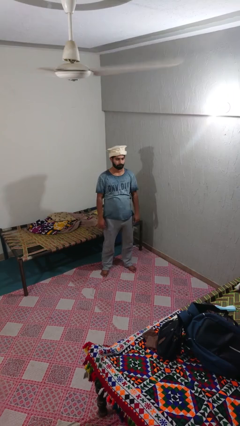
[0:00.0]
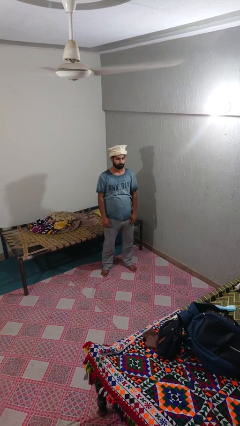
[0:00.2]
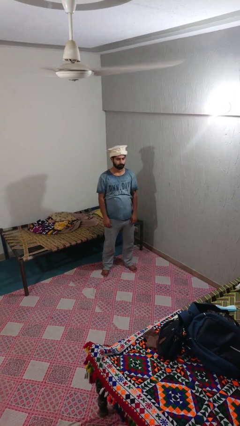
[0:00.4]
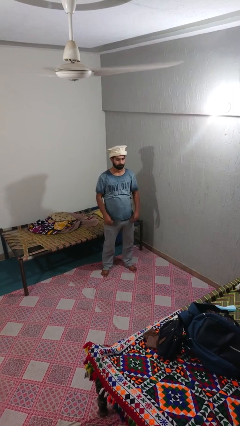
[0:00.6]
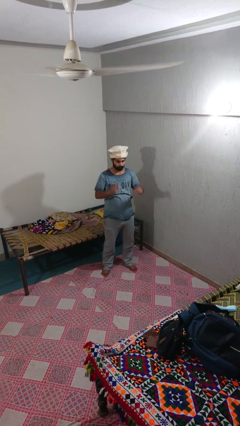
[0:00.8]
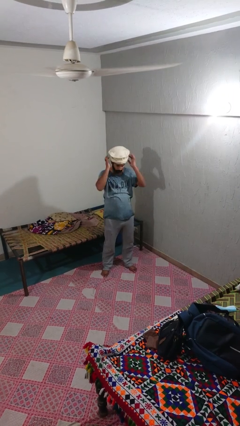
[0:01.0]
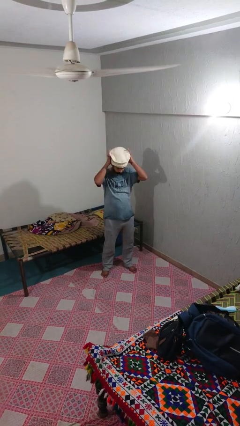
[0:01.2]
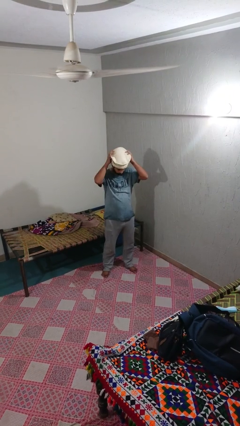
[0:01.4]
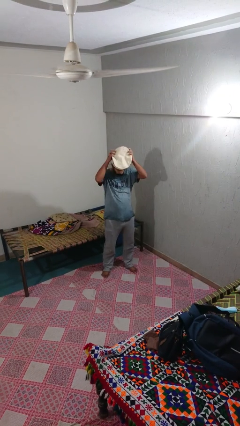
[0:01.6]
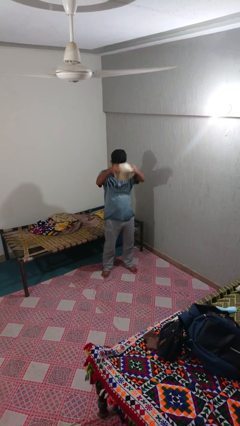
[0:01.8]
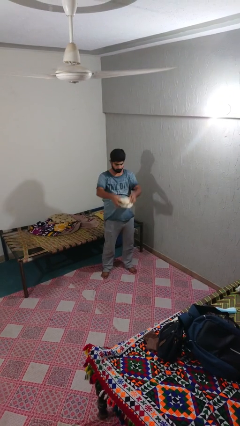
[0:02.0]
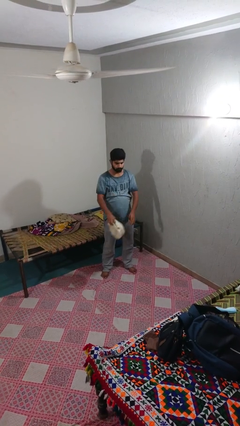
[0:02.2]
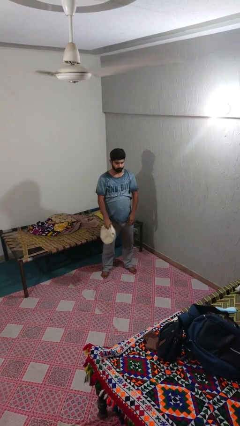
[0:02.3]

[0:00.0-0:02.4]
person takes off hat

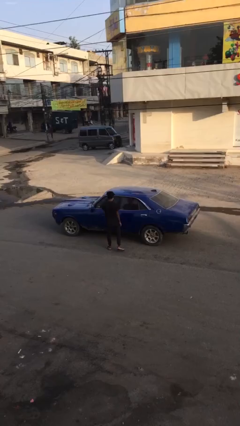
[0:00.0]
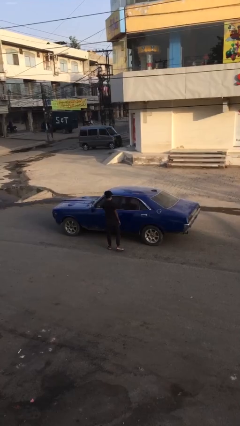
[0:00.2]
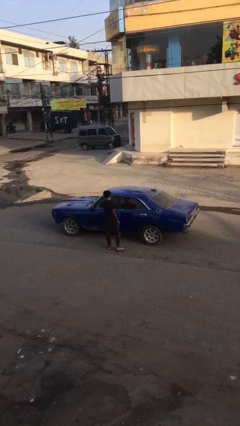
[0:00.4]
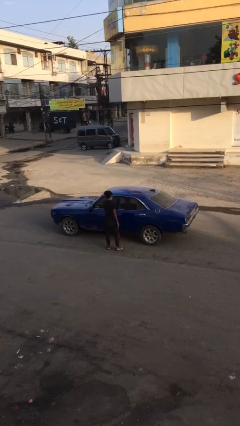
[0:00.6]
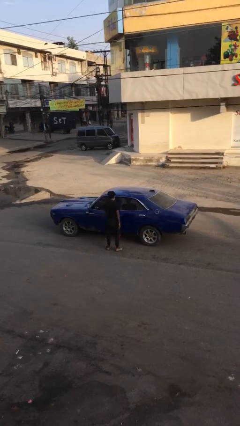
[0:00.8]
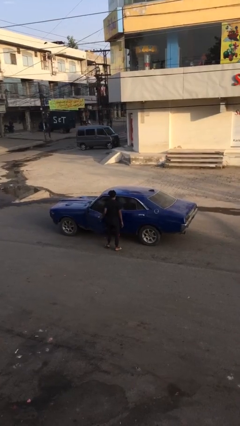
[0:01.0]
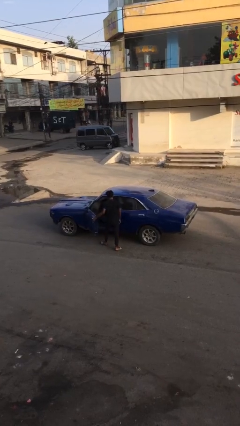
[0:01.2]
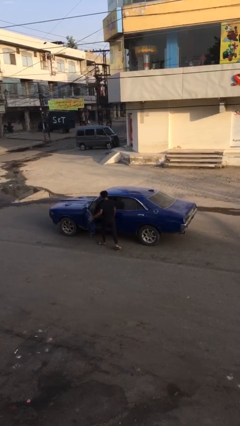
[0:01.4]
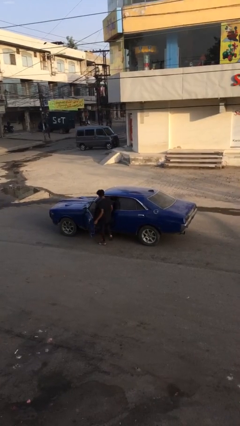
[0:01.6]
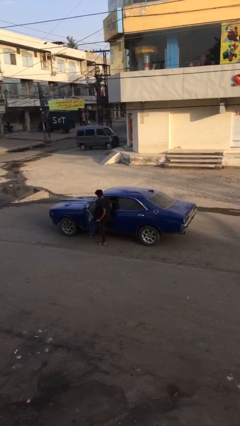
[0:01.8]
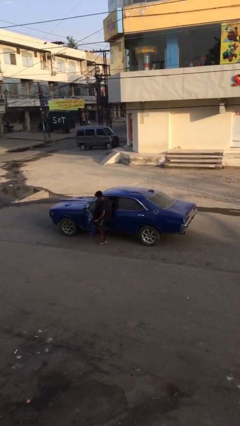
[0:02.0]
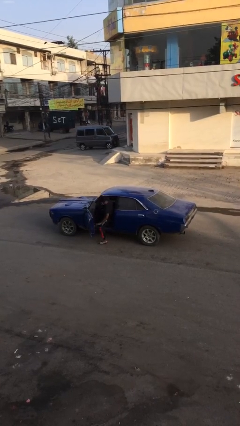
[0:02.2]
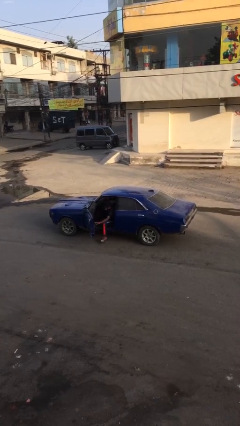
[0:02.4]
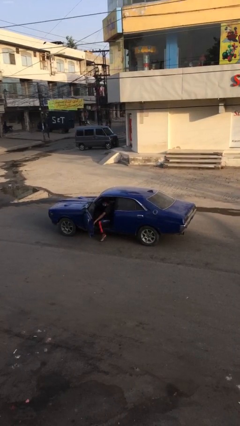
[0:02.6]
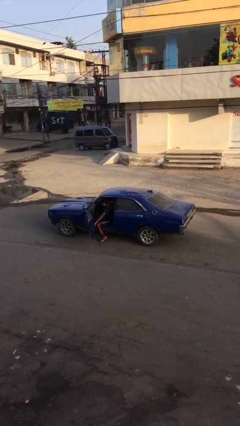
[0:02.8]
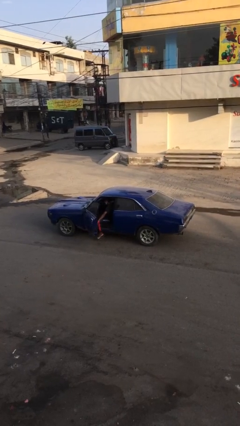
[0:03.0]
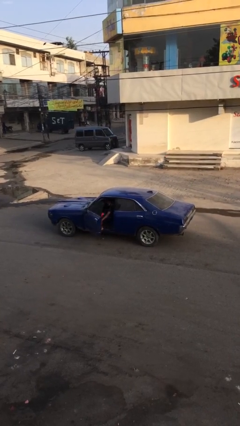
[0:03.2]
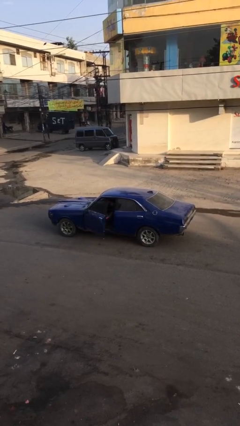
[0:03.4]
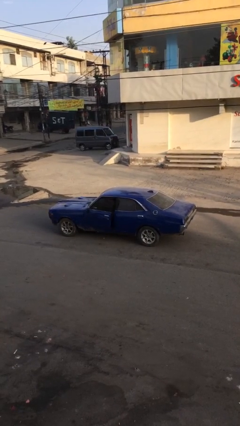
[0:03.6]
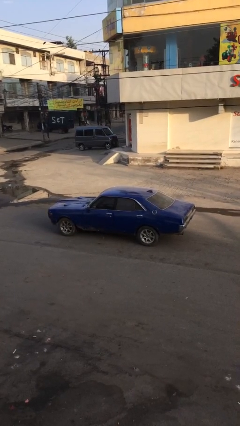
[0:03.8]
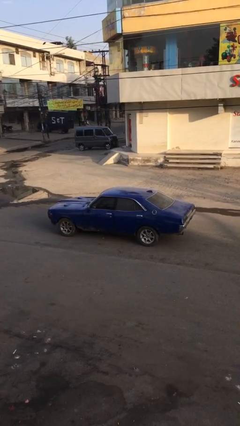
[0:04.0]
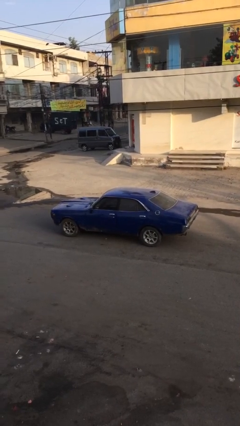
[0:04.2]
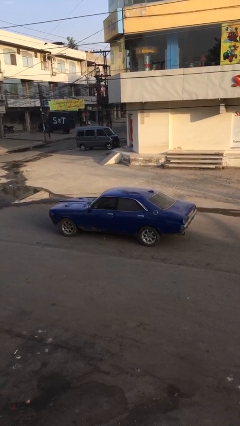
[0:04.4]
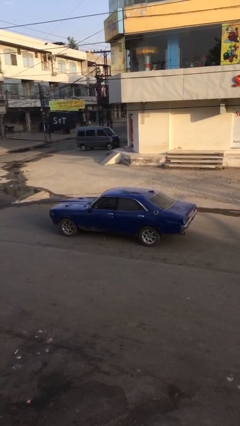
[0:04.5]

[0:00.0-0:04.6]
car picks up person

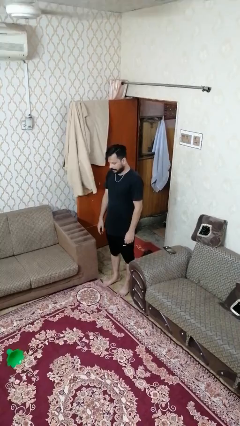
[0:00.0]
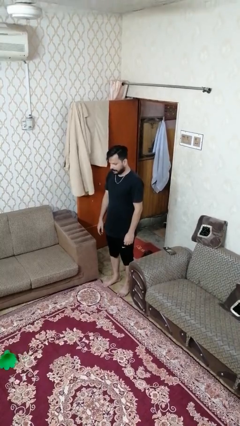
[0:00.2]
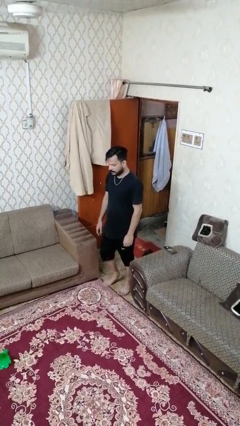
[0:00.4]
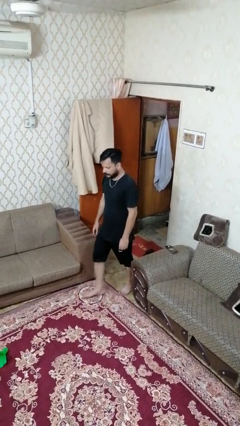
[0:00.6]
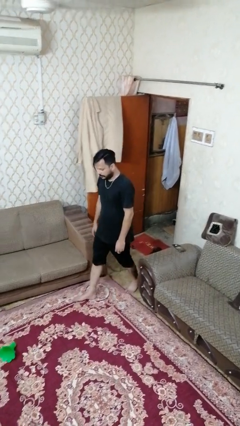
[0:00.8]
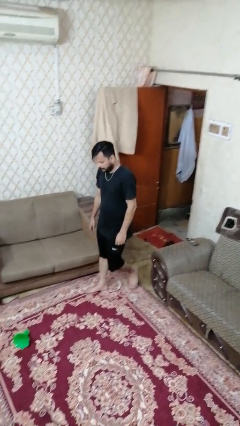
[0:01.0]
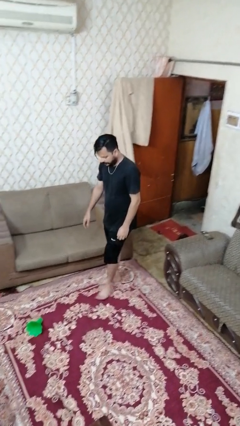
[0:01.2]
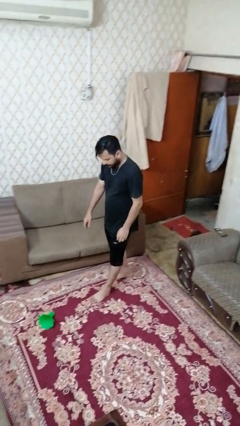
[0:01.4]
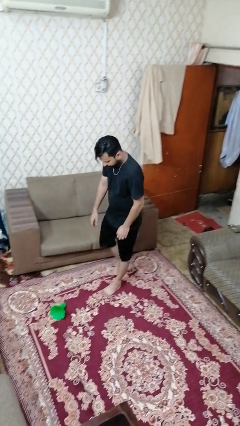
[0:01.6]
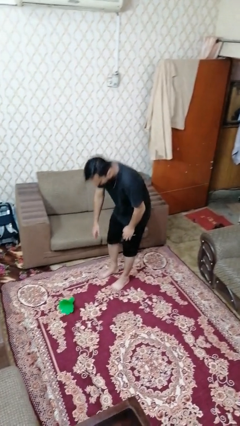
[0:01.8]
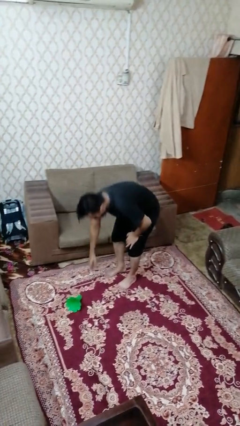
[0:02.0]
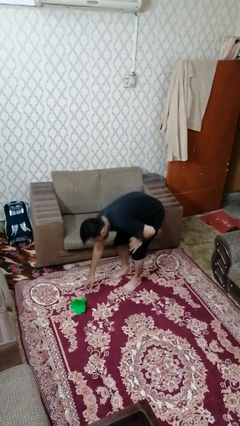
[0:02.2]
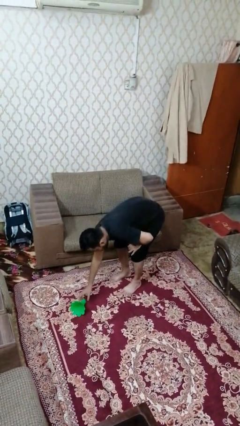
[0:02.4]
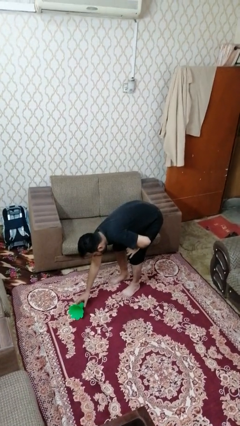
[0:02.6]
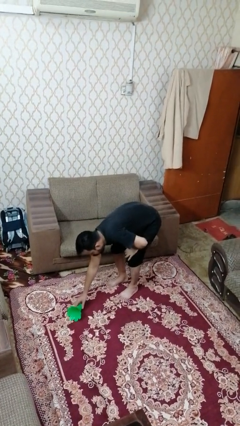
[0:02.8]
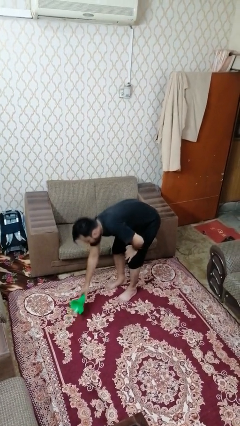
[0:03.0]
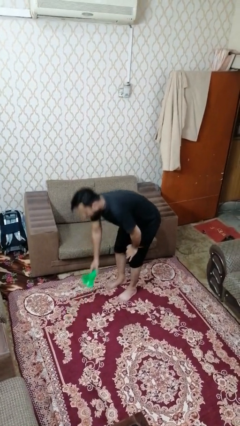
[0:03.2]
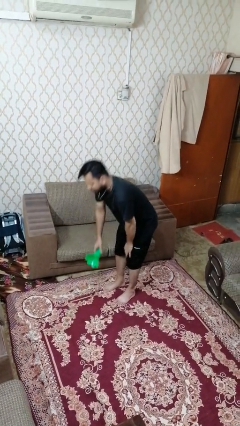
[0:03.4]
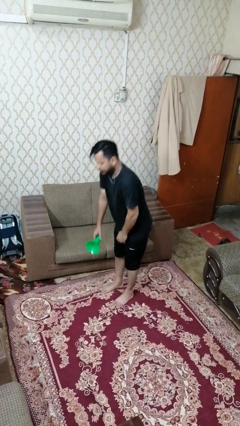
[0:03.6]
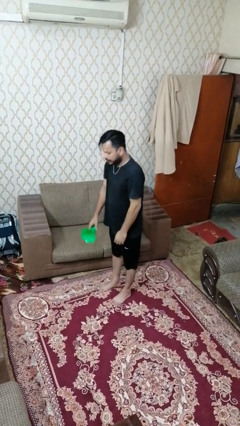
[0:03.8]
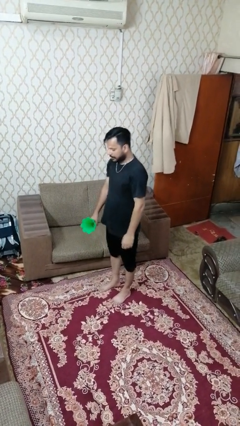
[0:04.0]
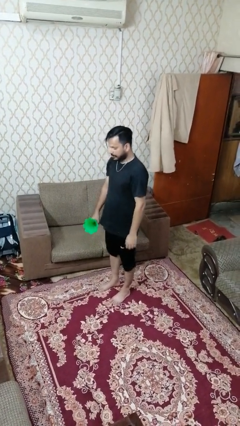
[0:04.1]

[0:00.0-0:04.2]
person picks up object from floor

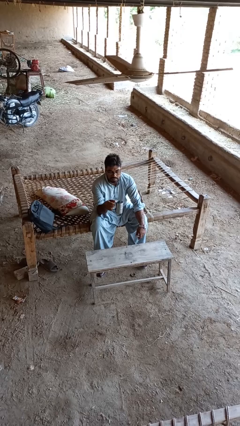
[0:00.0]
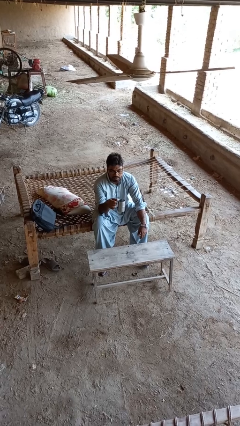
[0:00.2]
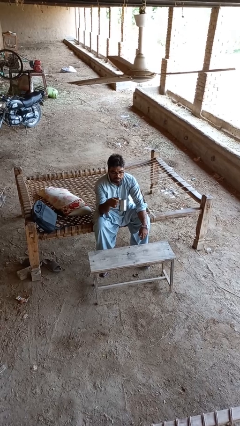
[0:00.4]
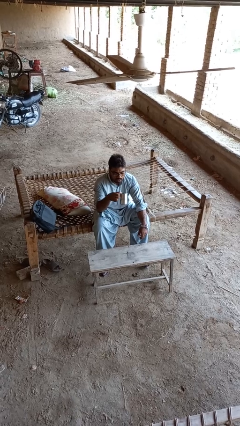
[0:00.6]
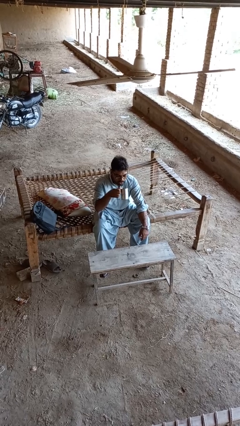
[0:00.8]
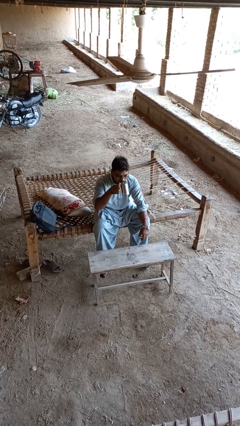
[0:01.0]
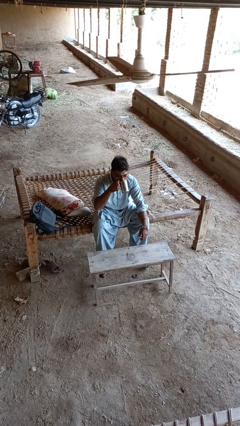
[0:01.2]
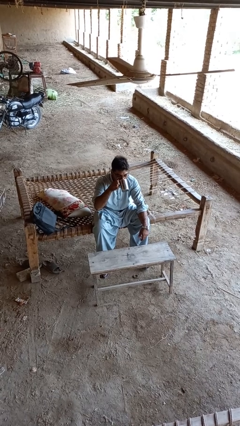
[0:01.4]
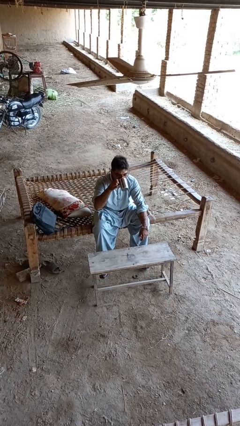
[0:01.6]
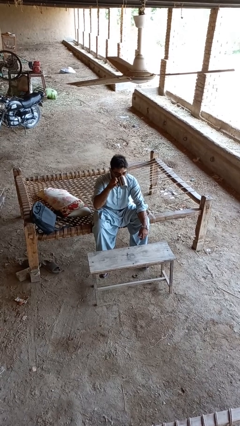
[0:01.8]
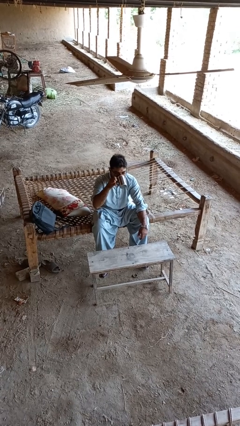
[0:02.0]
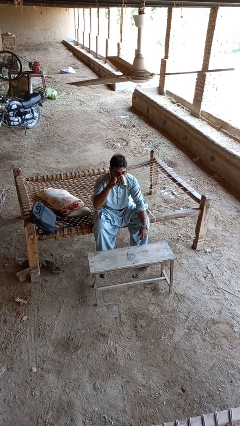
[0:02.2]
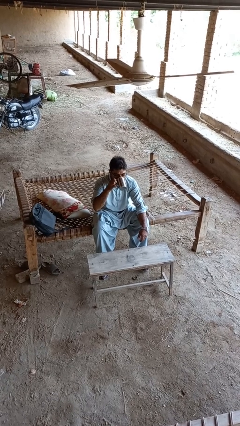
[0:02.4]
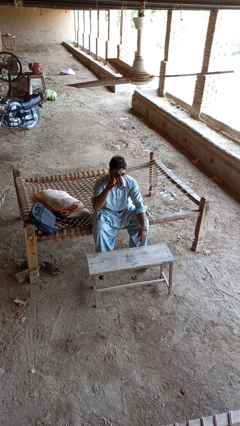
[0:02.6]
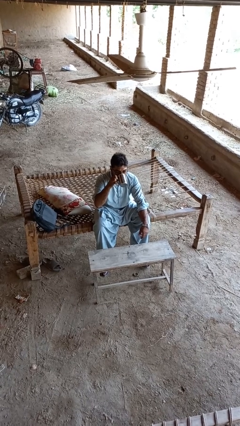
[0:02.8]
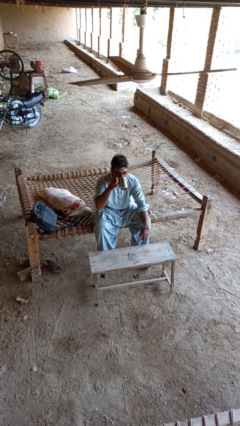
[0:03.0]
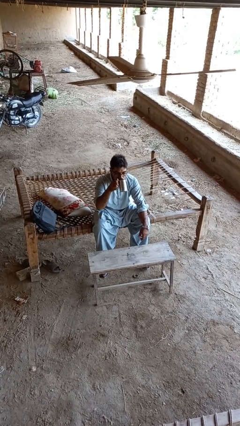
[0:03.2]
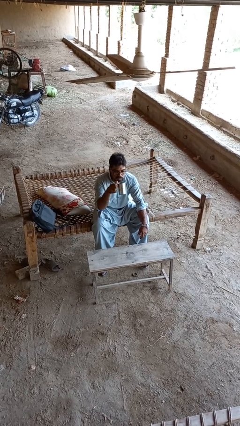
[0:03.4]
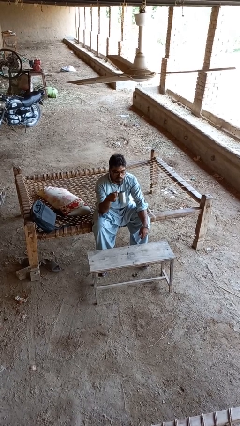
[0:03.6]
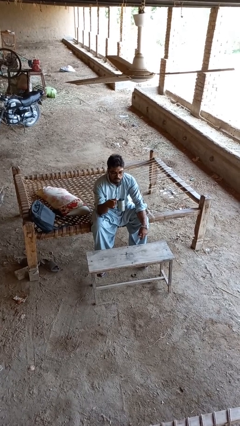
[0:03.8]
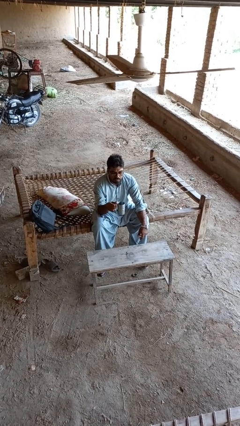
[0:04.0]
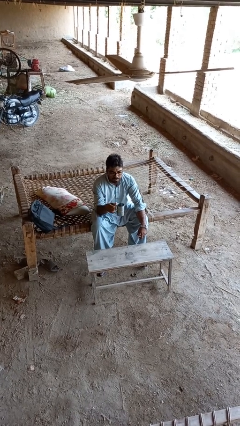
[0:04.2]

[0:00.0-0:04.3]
person drinks from mug

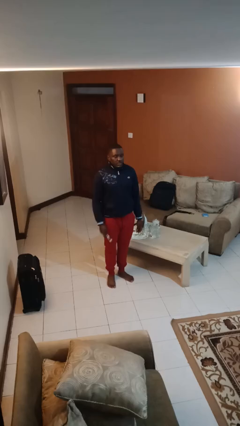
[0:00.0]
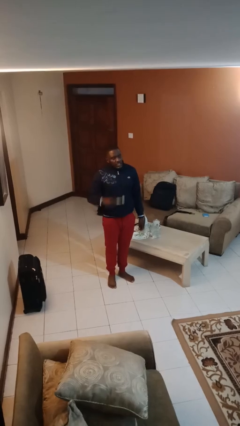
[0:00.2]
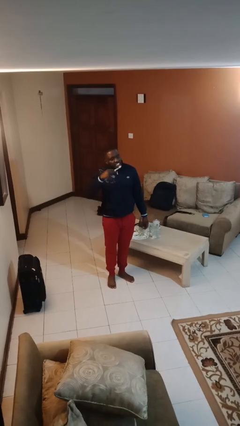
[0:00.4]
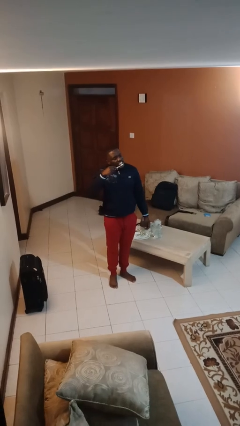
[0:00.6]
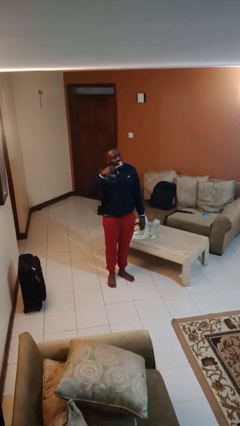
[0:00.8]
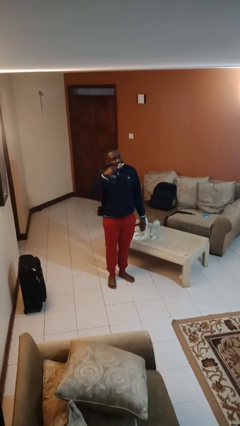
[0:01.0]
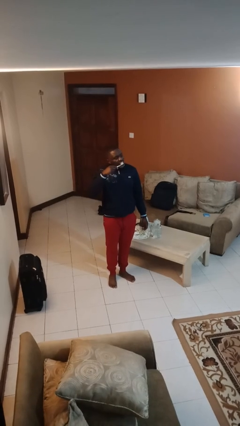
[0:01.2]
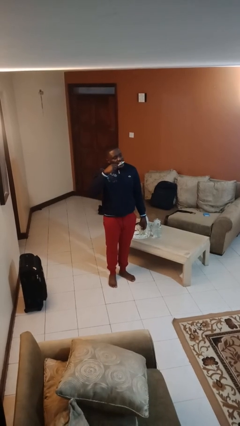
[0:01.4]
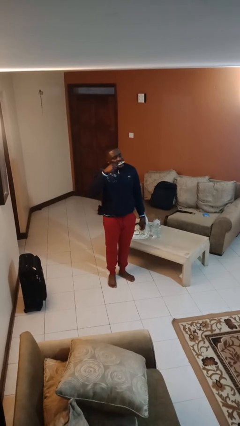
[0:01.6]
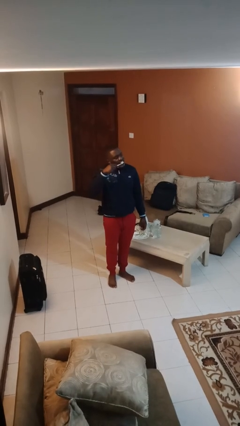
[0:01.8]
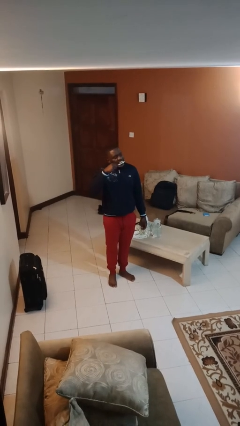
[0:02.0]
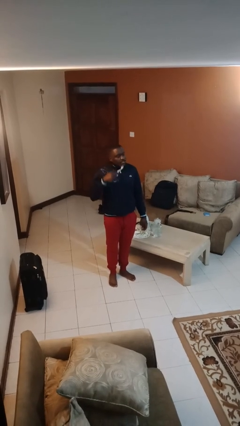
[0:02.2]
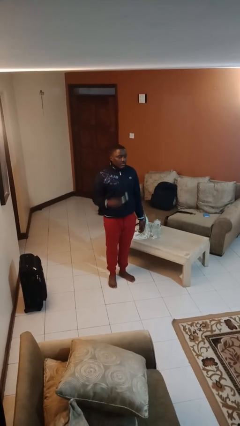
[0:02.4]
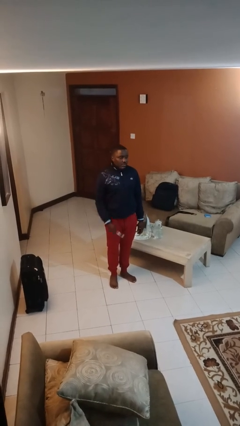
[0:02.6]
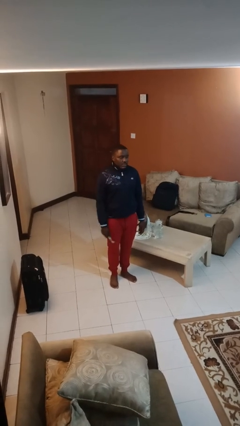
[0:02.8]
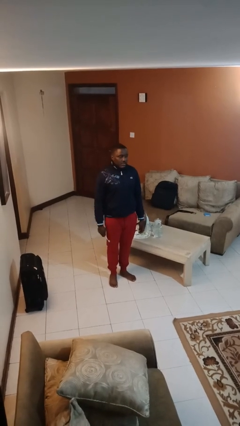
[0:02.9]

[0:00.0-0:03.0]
person brushes teeth
